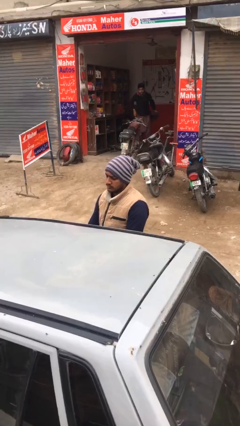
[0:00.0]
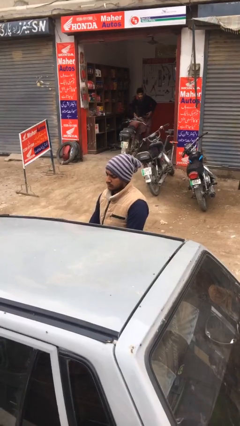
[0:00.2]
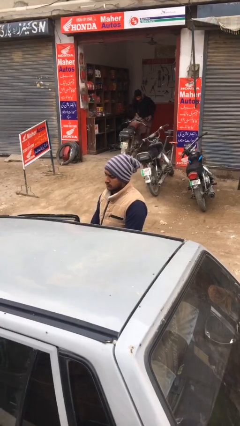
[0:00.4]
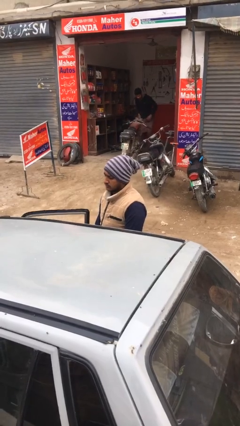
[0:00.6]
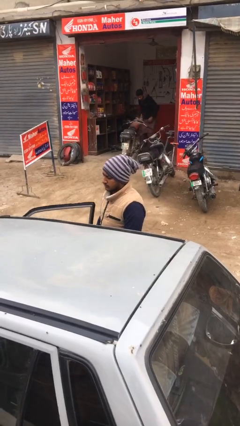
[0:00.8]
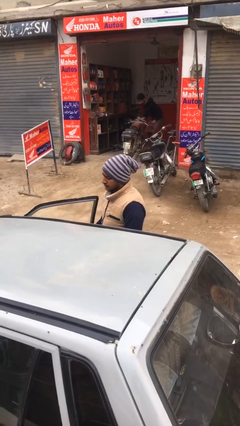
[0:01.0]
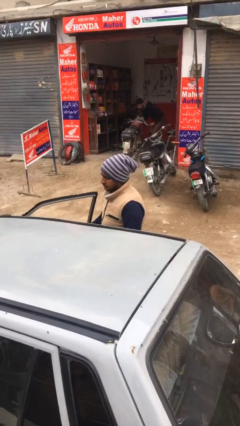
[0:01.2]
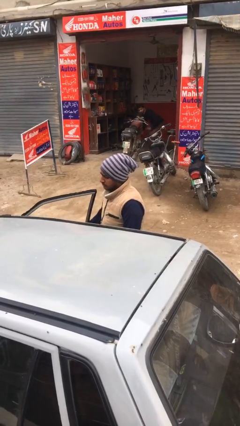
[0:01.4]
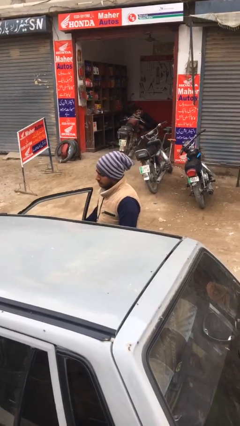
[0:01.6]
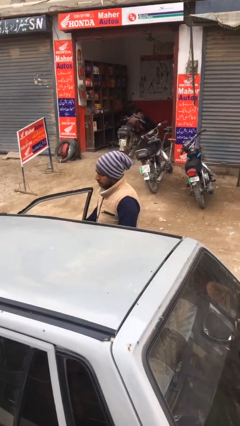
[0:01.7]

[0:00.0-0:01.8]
person opens car door

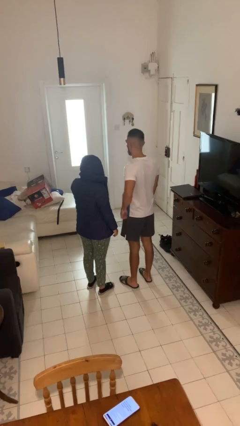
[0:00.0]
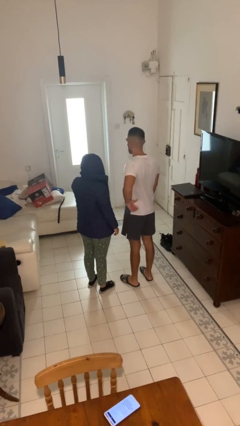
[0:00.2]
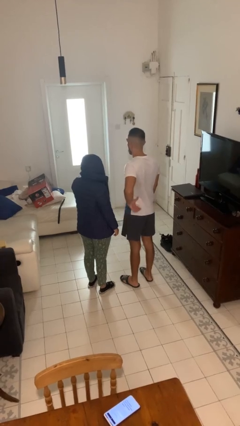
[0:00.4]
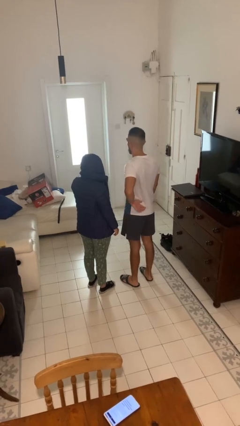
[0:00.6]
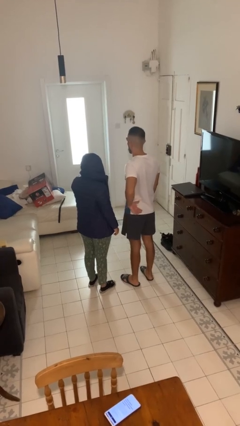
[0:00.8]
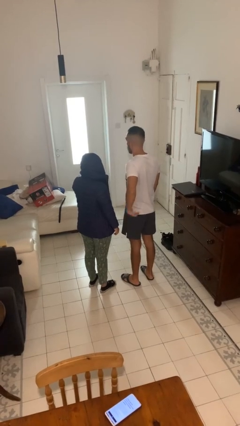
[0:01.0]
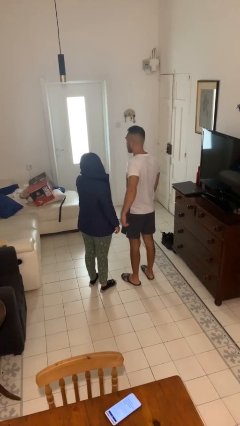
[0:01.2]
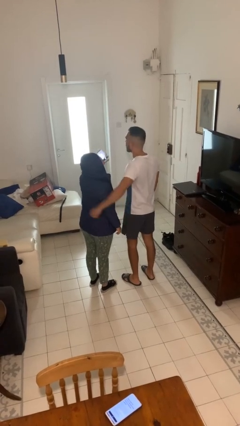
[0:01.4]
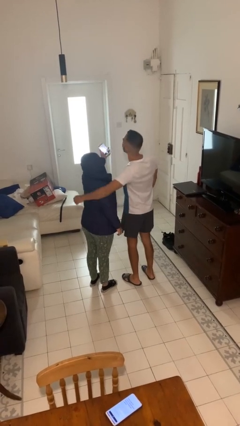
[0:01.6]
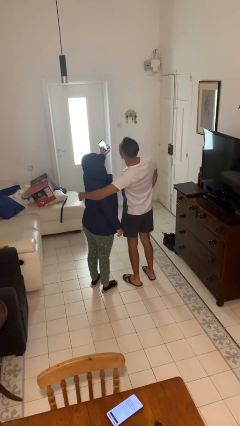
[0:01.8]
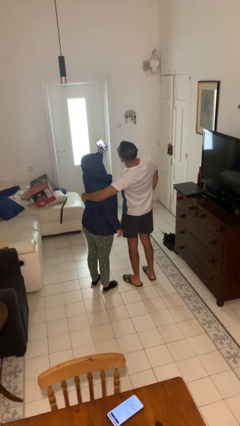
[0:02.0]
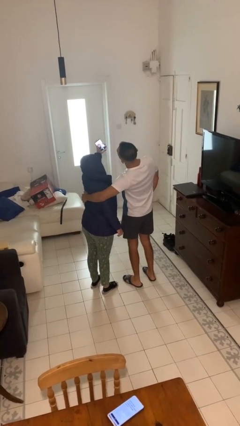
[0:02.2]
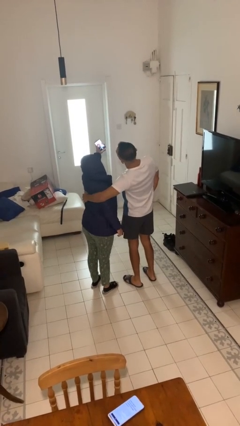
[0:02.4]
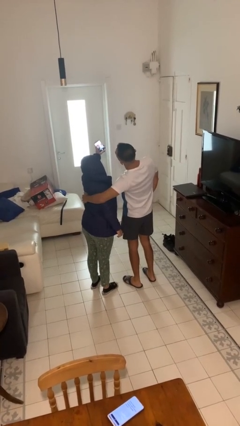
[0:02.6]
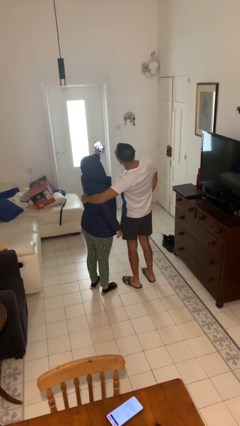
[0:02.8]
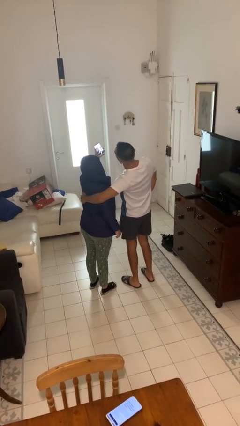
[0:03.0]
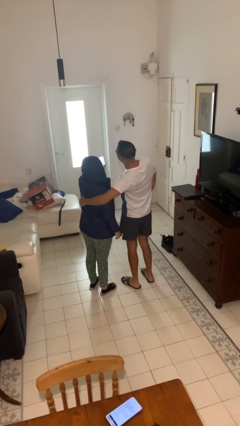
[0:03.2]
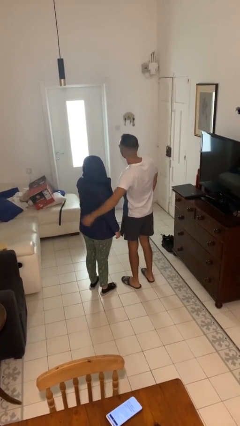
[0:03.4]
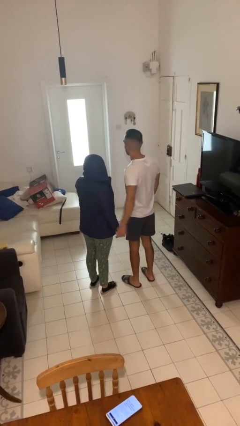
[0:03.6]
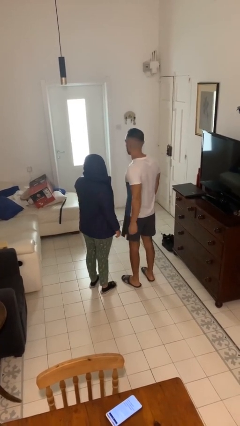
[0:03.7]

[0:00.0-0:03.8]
person takes selfie with person

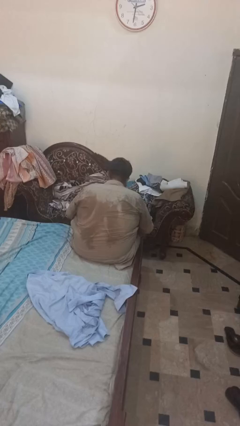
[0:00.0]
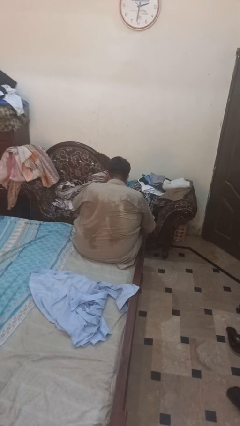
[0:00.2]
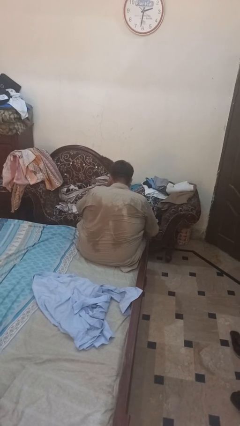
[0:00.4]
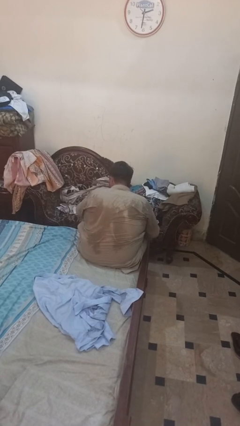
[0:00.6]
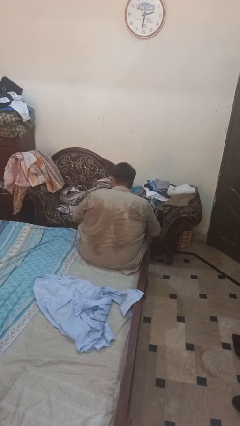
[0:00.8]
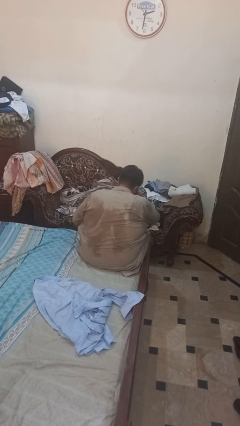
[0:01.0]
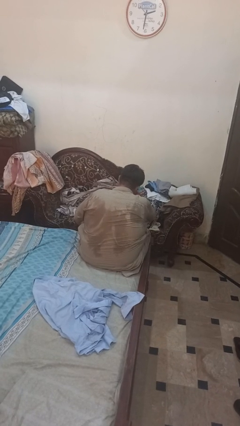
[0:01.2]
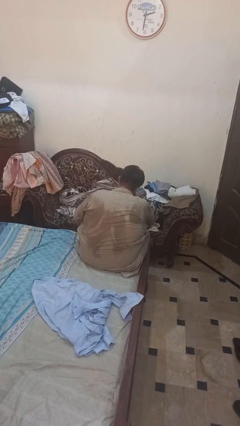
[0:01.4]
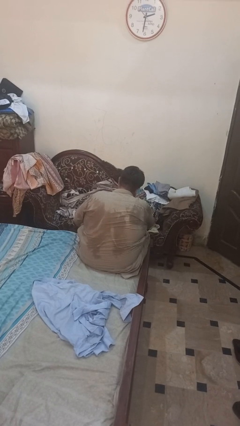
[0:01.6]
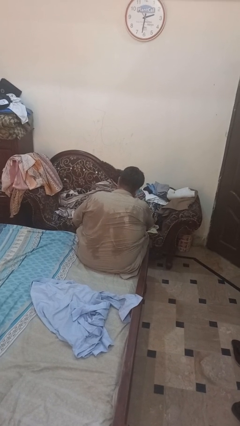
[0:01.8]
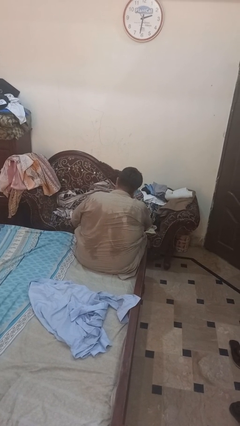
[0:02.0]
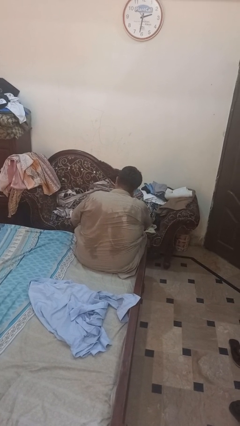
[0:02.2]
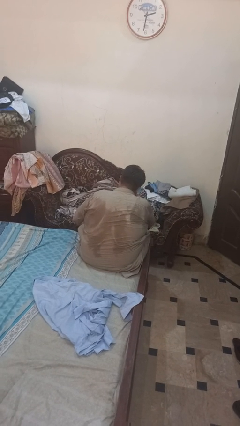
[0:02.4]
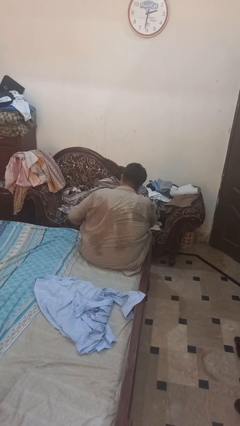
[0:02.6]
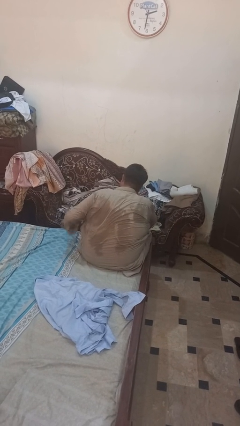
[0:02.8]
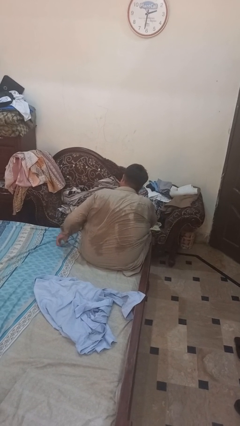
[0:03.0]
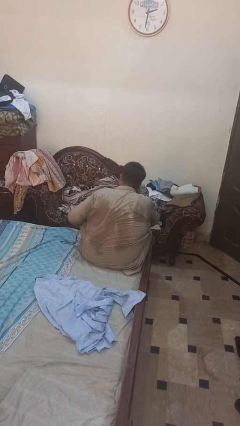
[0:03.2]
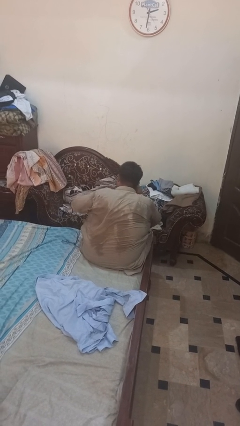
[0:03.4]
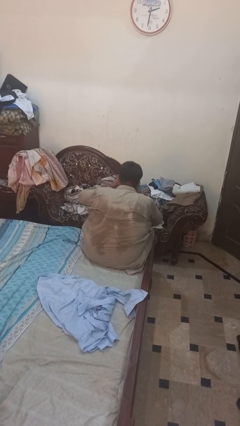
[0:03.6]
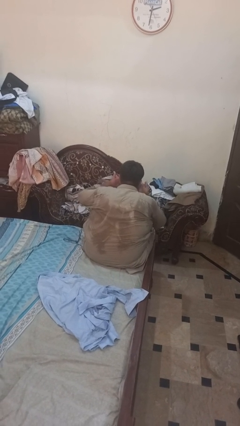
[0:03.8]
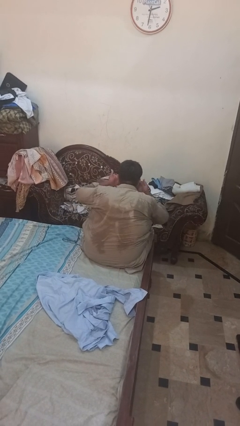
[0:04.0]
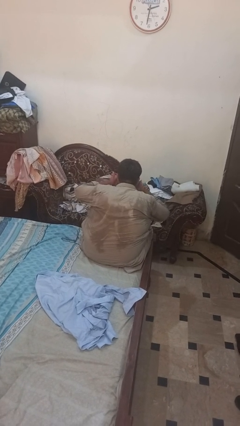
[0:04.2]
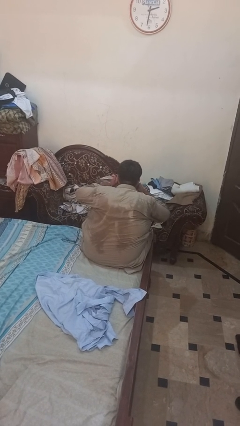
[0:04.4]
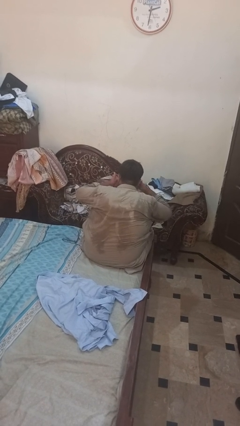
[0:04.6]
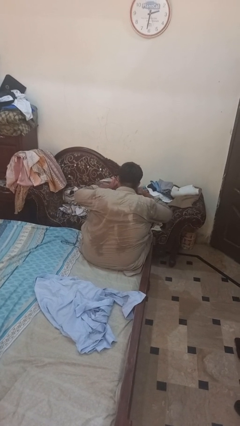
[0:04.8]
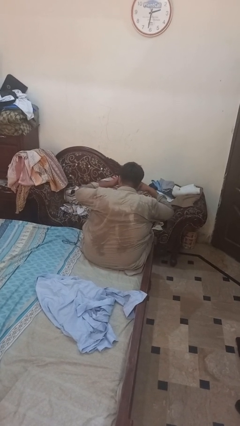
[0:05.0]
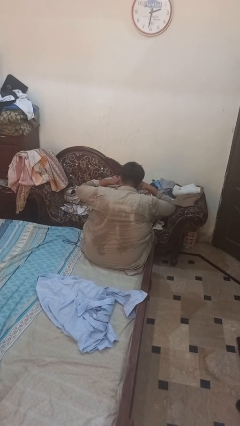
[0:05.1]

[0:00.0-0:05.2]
person rubs eyes

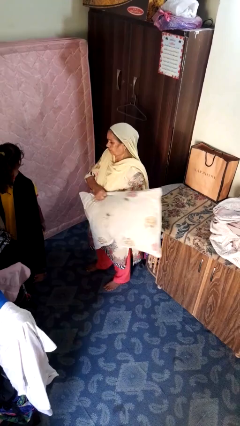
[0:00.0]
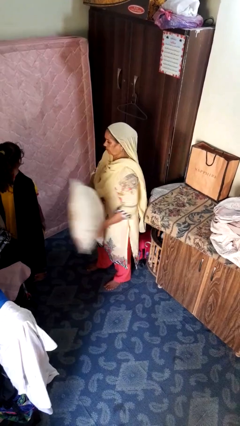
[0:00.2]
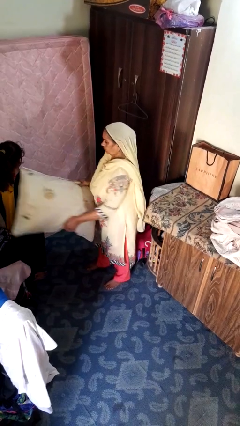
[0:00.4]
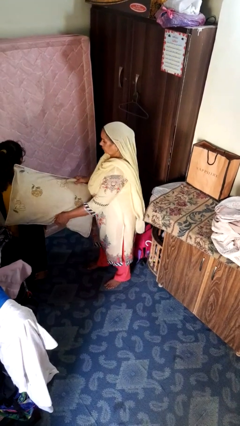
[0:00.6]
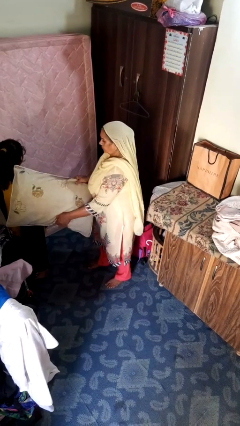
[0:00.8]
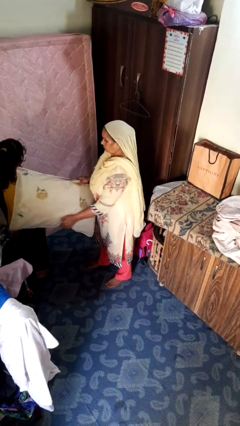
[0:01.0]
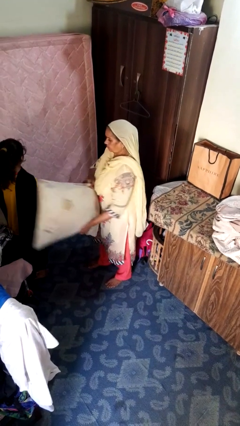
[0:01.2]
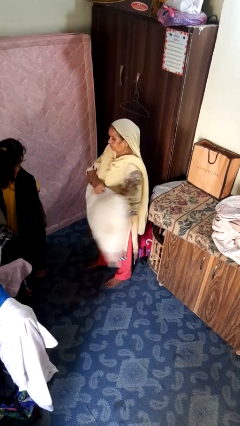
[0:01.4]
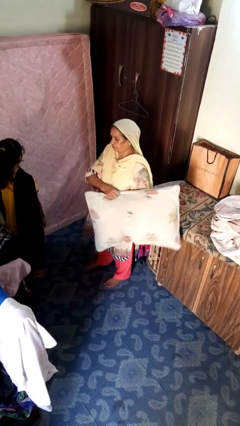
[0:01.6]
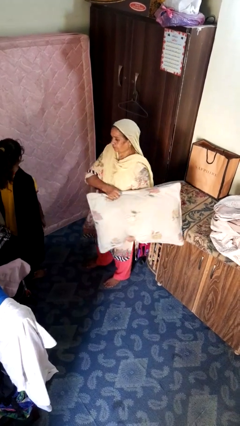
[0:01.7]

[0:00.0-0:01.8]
person hits person with pillow

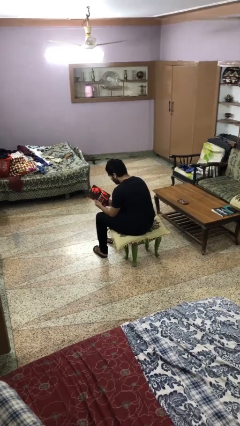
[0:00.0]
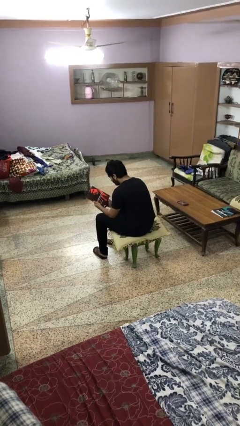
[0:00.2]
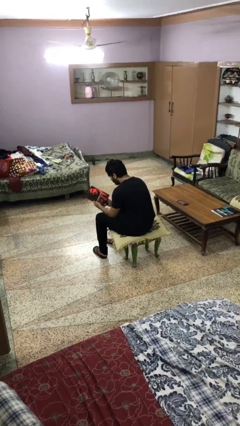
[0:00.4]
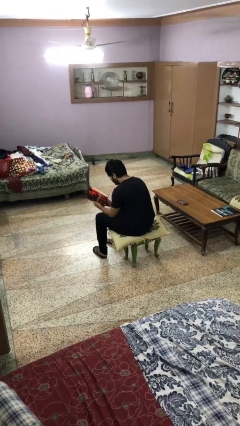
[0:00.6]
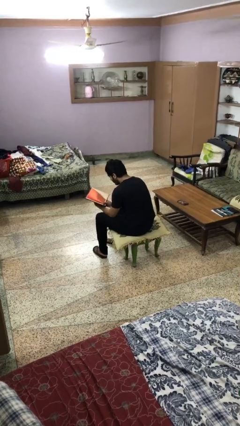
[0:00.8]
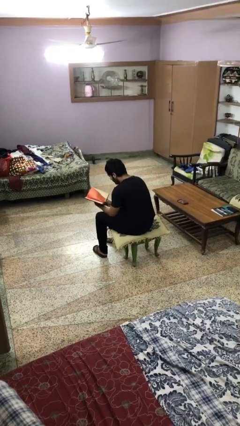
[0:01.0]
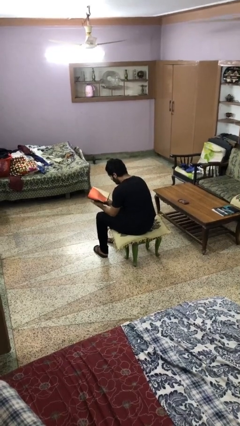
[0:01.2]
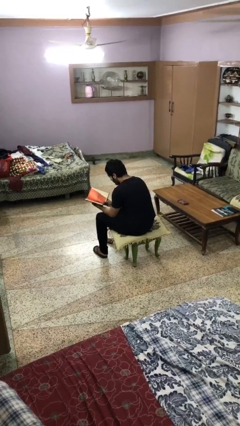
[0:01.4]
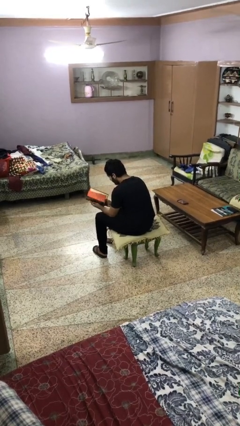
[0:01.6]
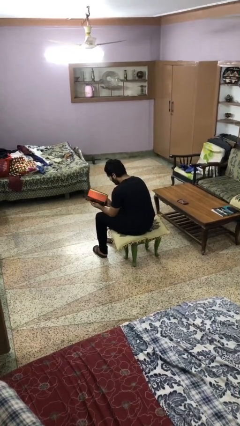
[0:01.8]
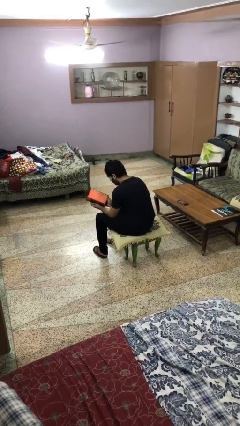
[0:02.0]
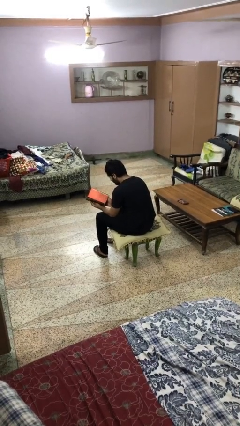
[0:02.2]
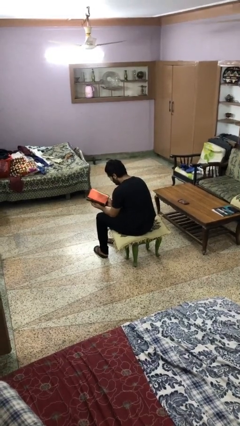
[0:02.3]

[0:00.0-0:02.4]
person reads magazine

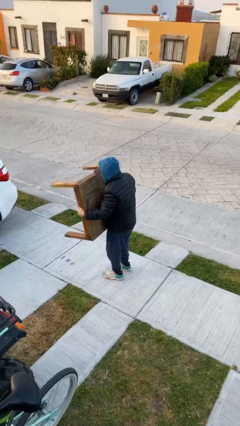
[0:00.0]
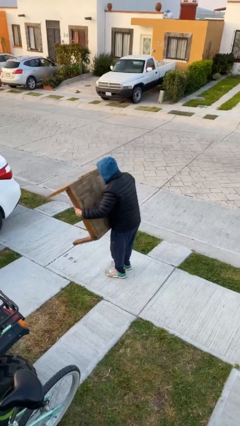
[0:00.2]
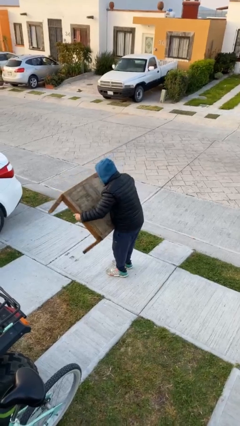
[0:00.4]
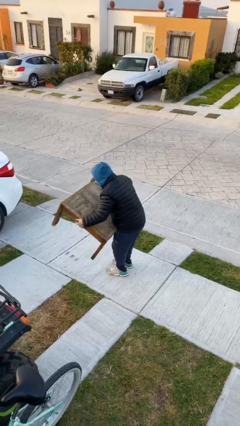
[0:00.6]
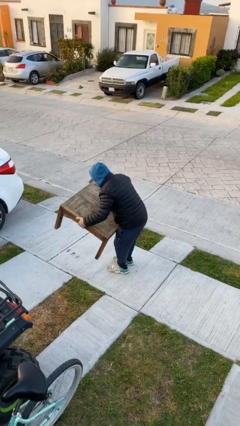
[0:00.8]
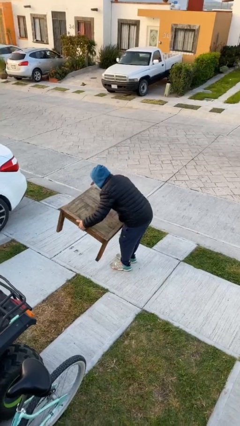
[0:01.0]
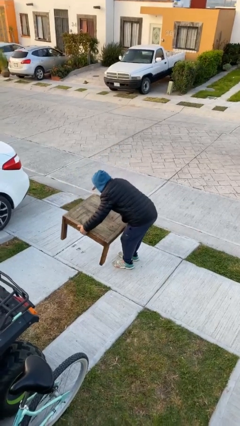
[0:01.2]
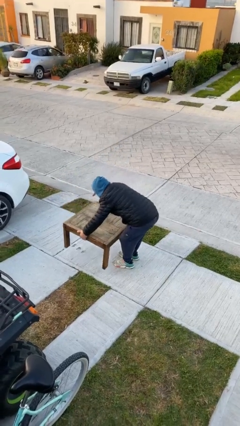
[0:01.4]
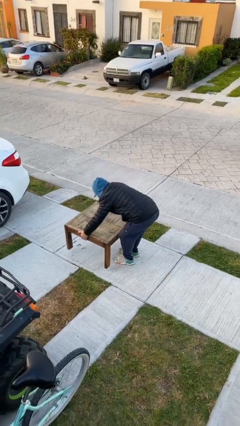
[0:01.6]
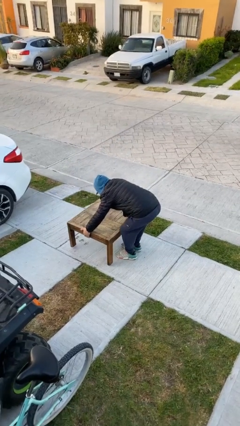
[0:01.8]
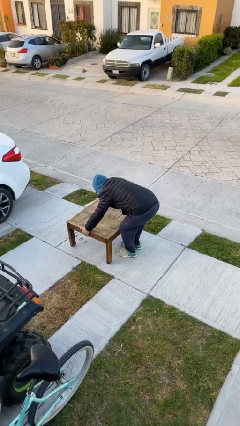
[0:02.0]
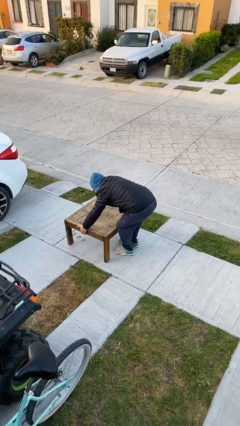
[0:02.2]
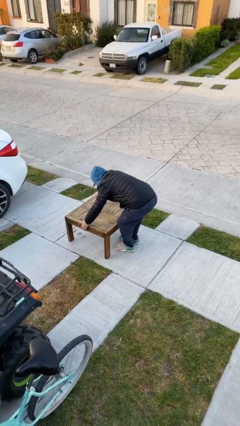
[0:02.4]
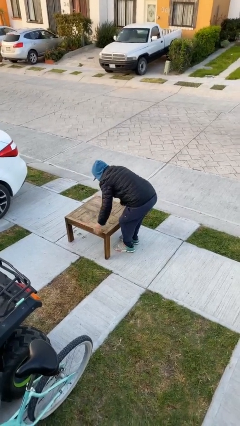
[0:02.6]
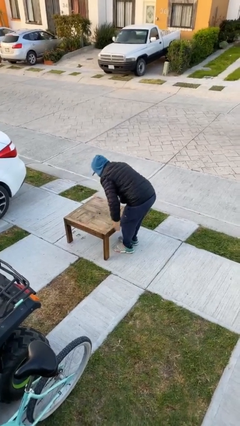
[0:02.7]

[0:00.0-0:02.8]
person puts down object on floor
